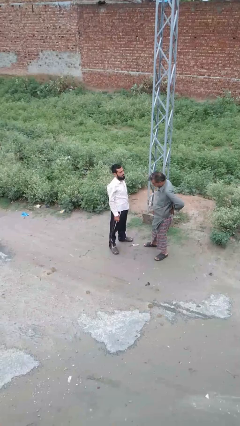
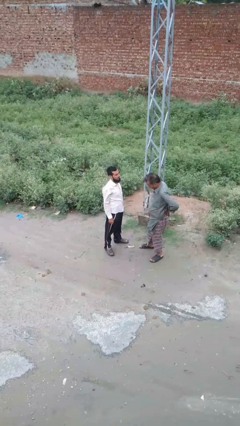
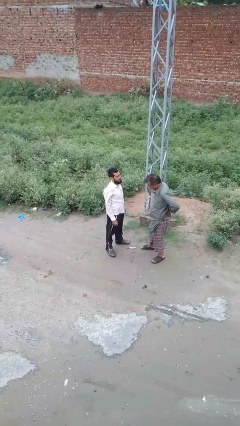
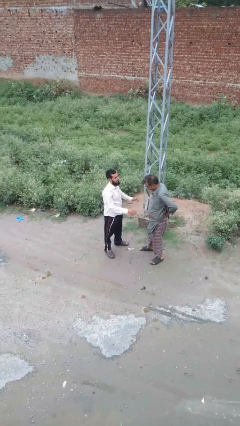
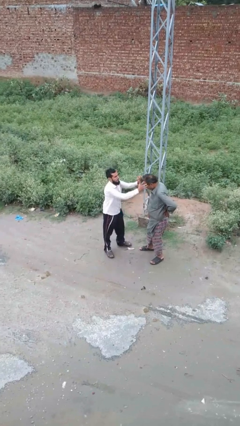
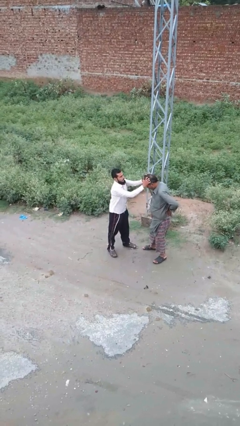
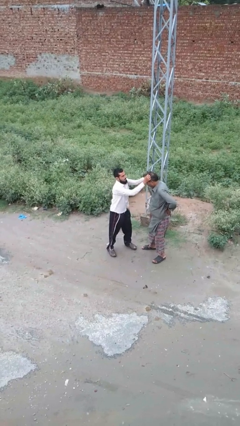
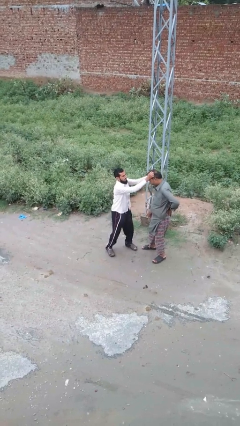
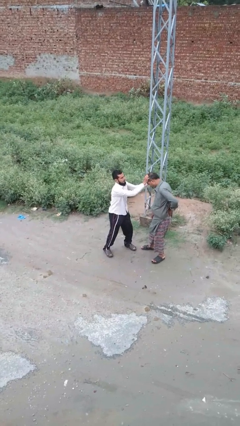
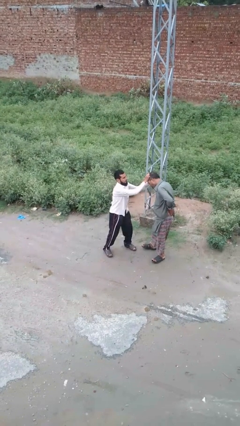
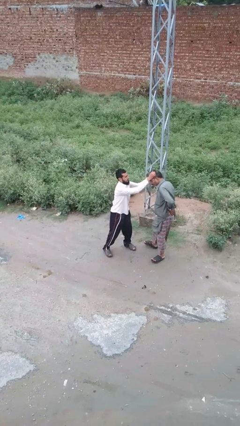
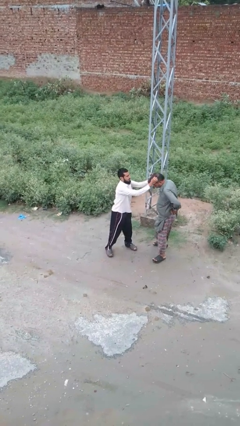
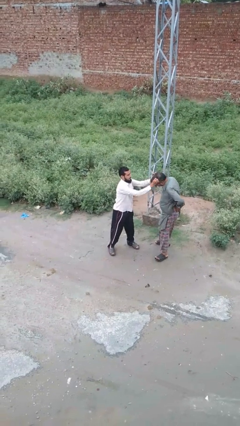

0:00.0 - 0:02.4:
person grabs person by hair

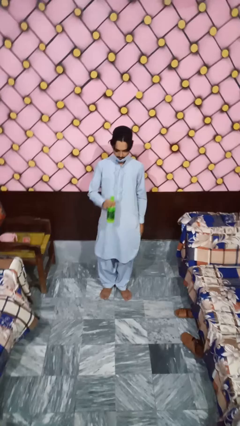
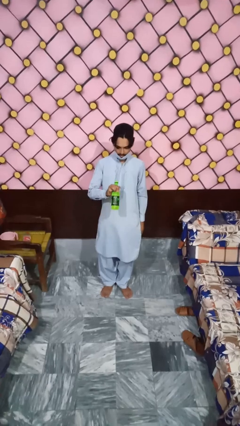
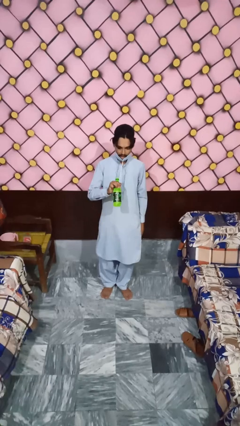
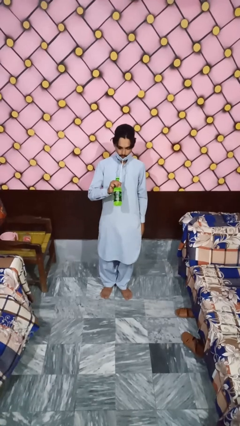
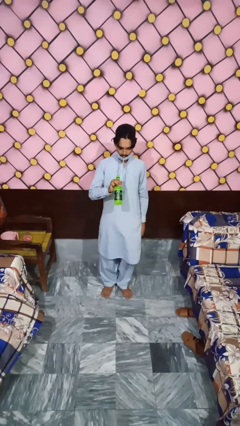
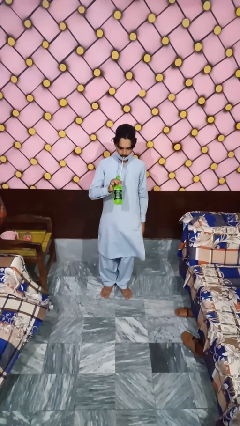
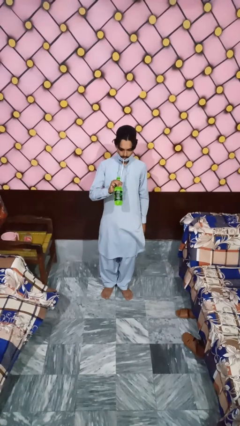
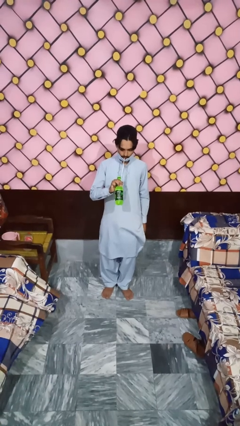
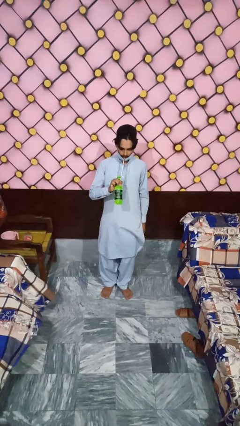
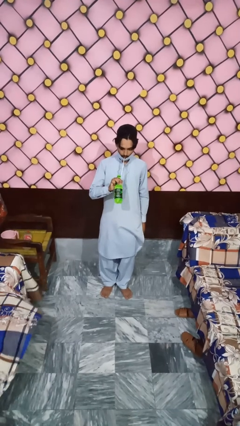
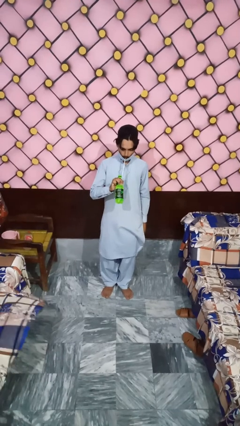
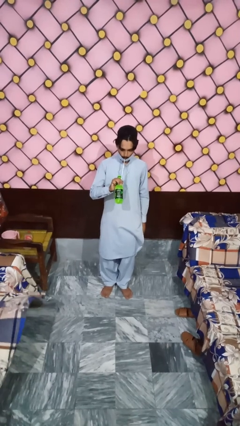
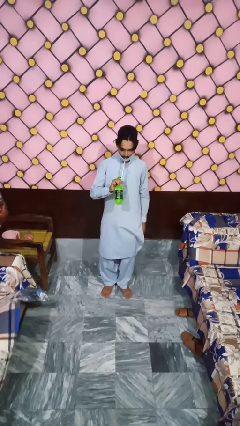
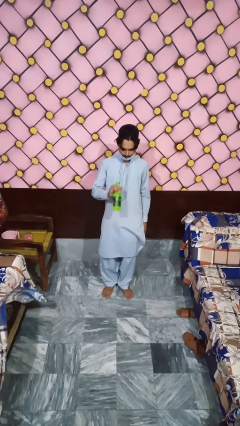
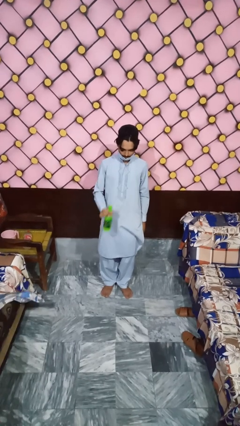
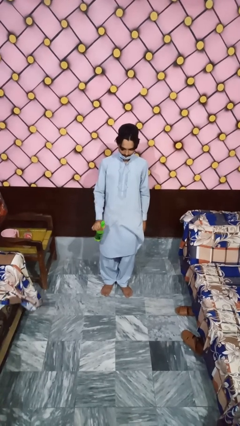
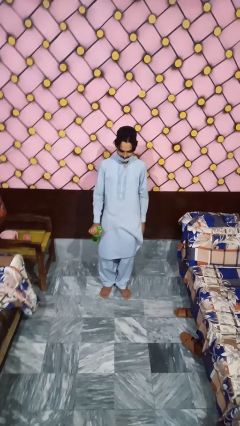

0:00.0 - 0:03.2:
person drinks from straw

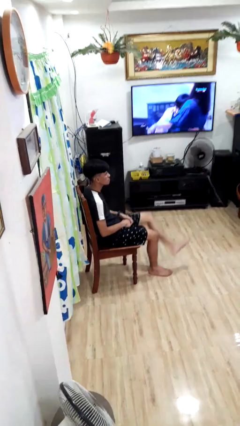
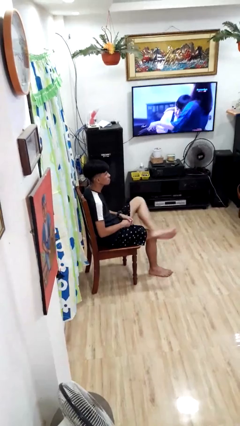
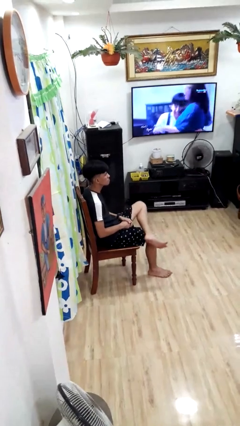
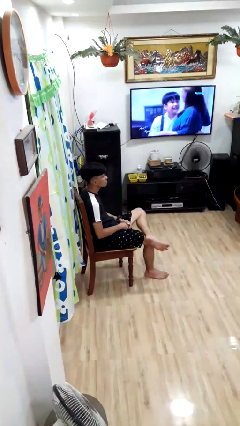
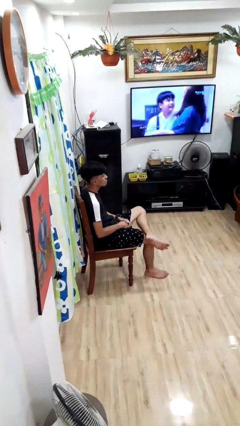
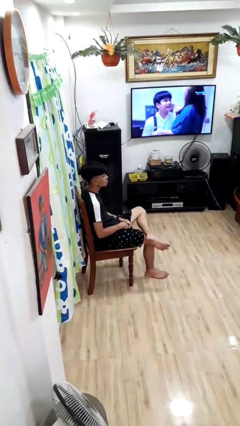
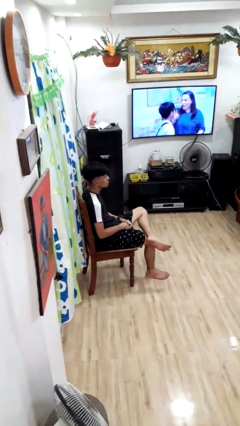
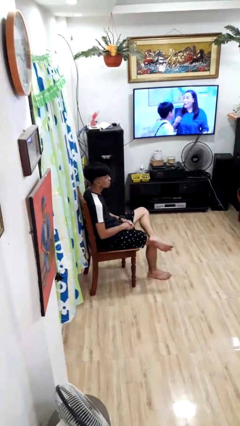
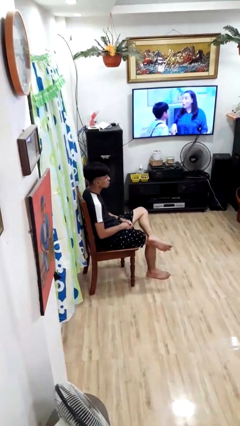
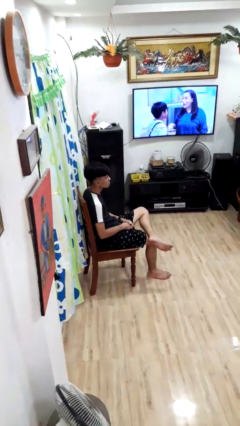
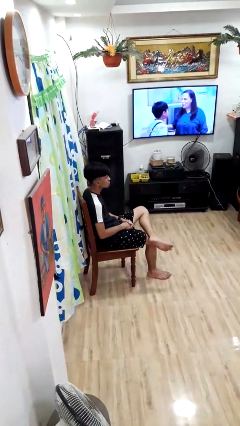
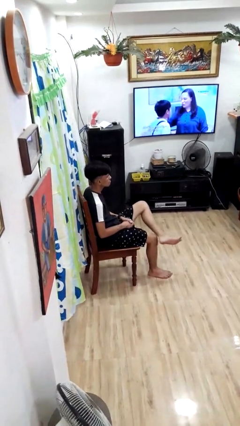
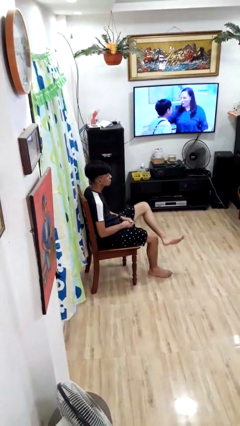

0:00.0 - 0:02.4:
person crosses legs

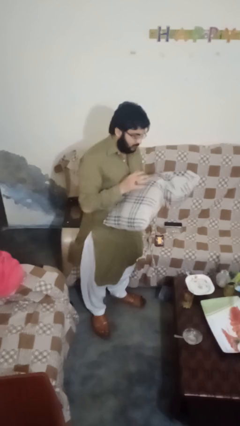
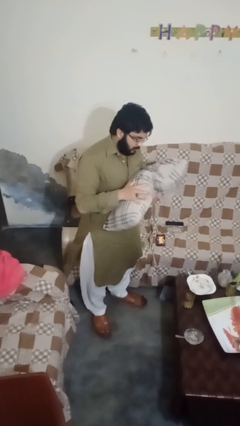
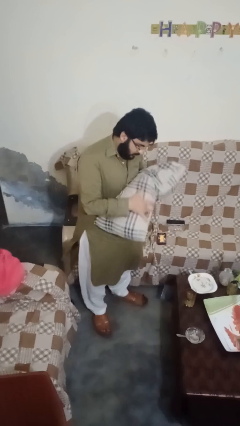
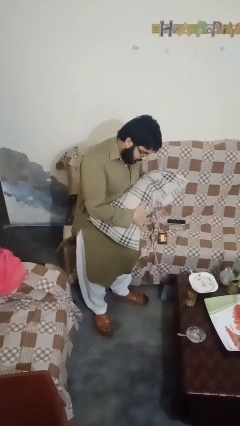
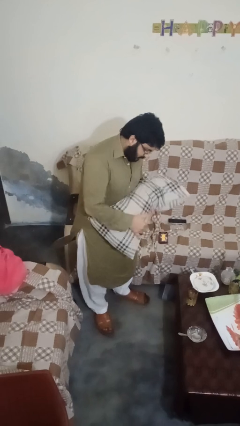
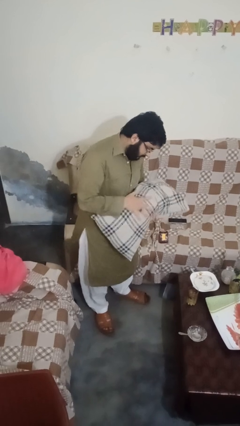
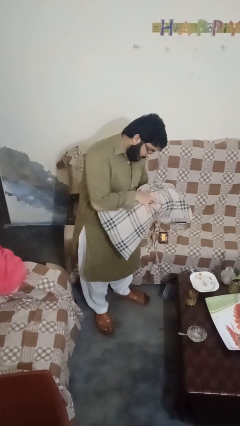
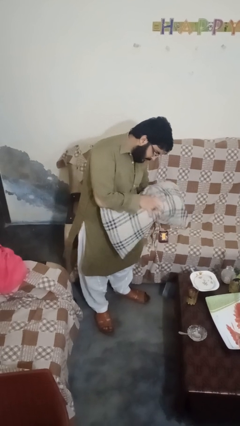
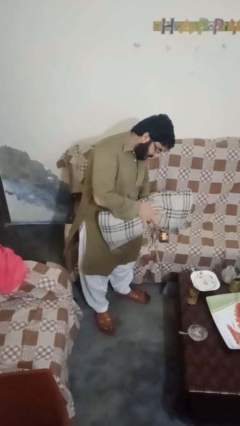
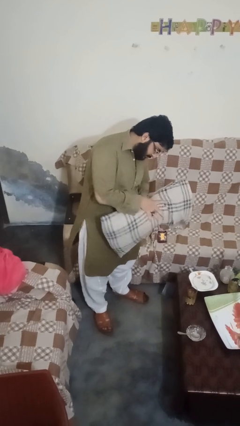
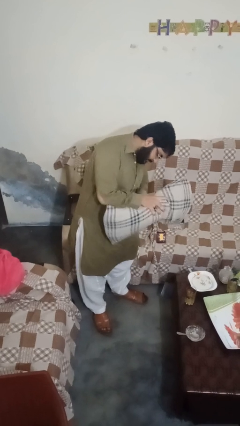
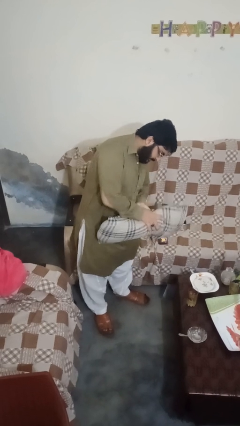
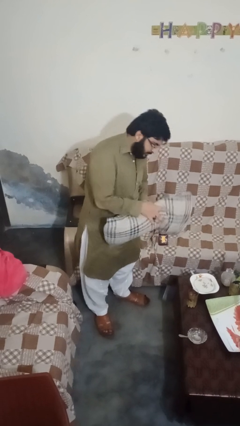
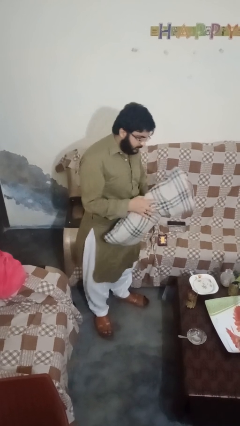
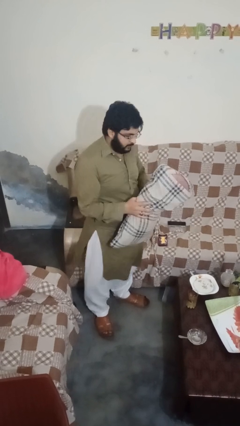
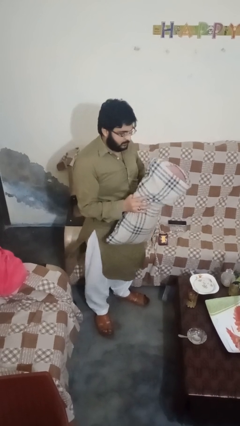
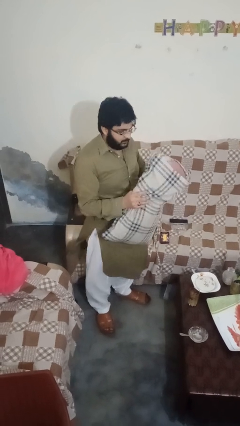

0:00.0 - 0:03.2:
person squeezes object

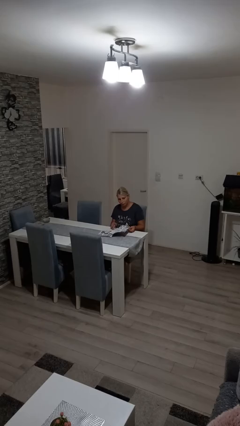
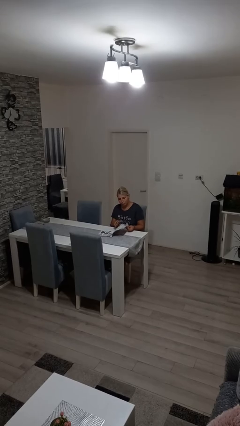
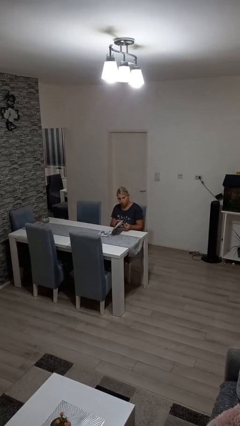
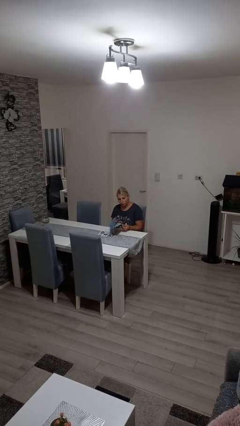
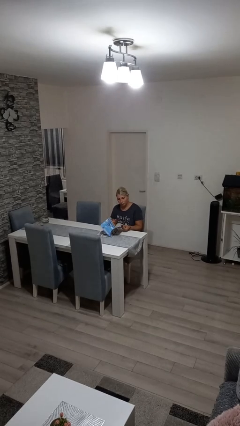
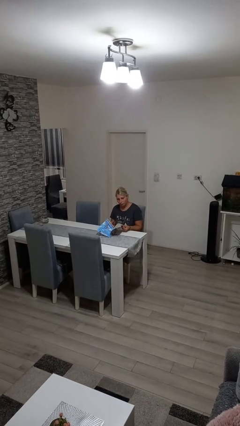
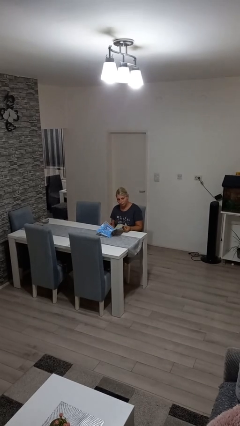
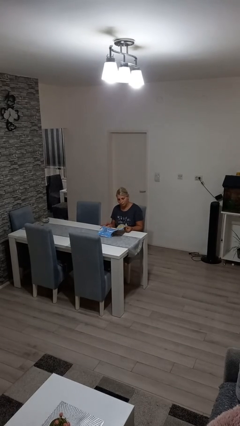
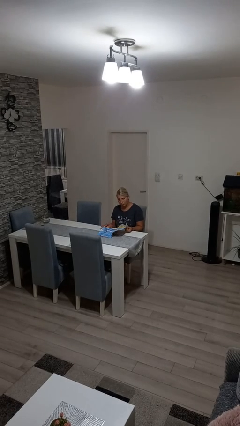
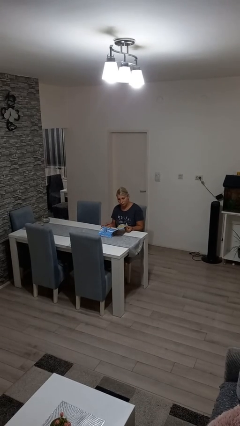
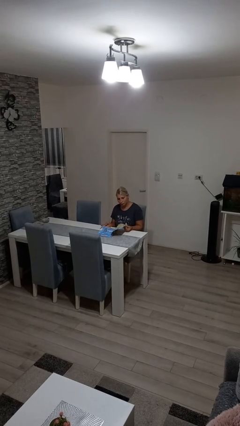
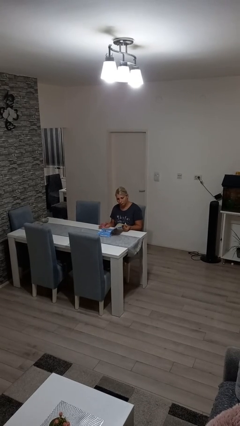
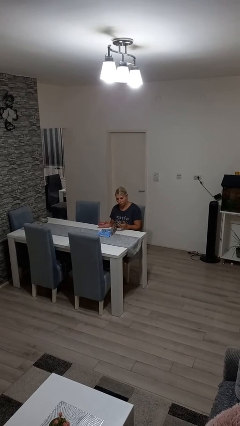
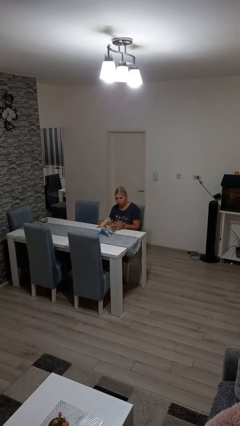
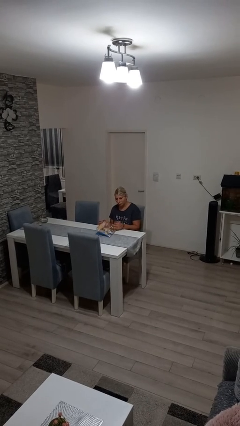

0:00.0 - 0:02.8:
person reads magazine

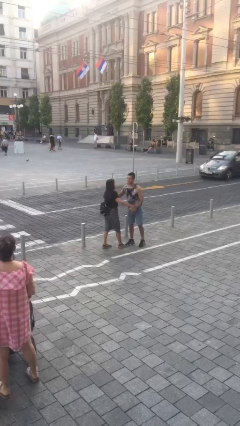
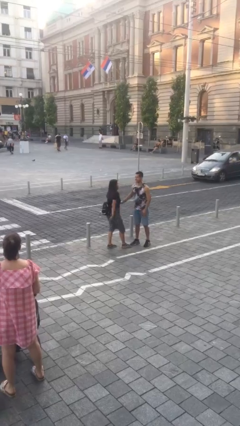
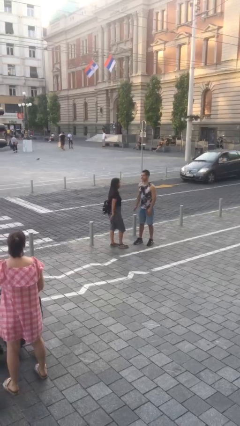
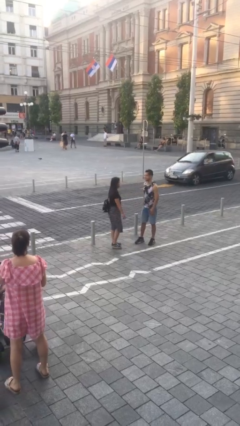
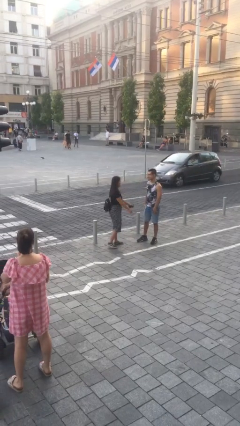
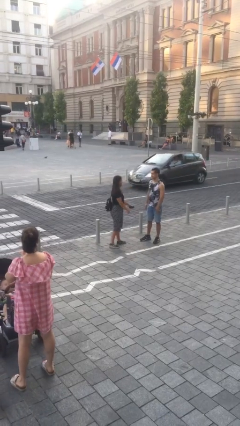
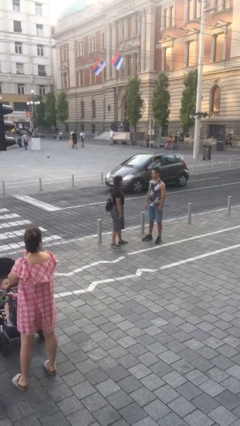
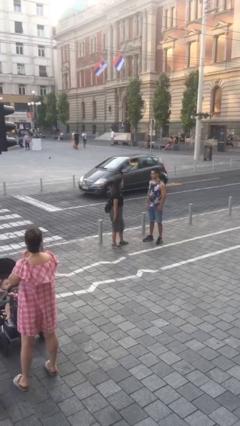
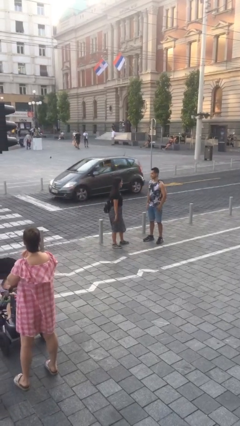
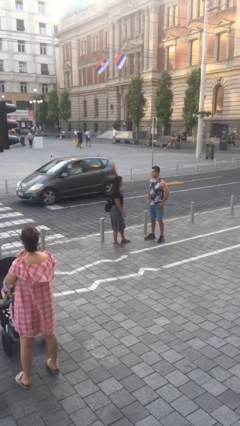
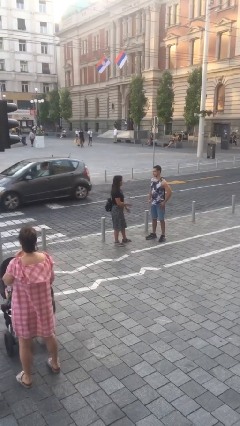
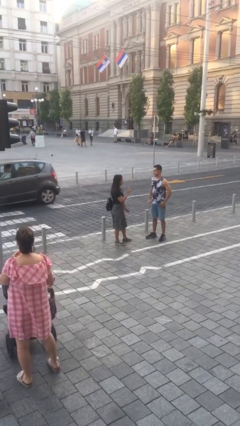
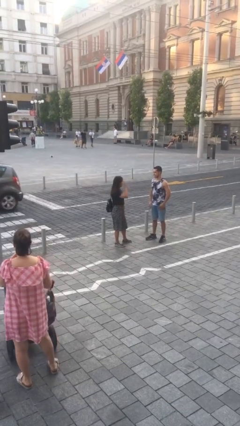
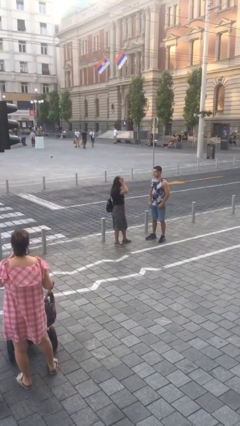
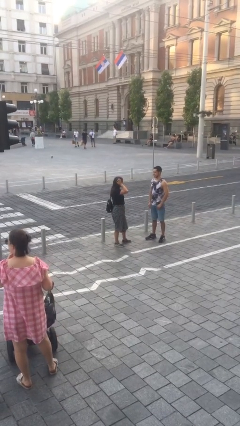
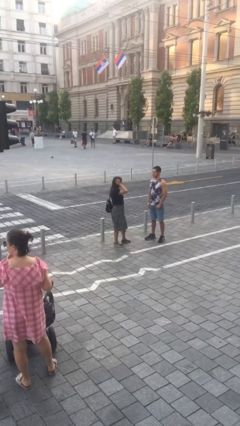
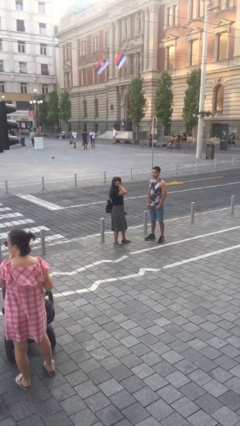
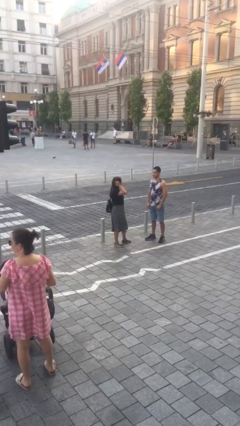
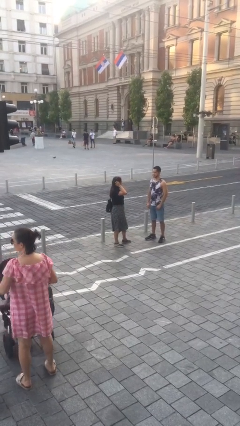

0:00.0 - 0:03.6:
person talks to person
